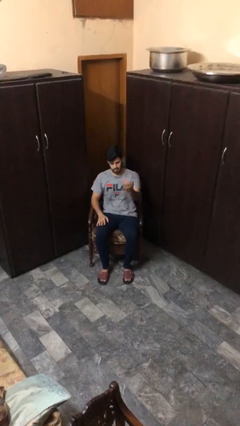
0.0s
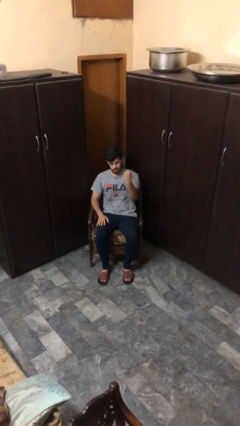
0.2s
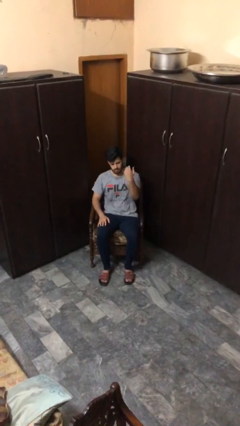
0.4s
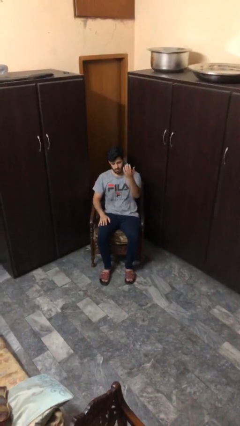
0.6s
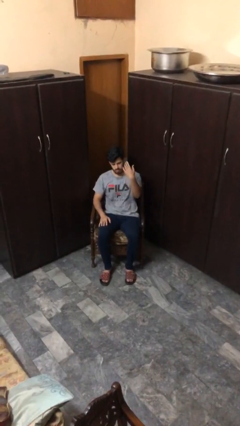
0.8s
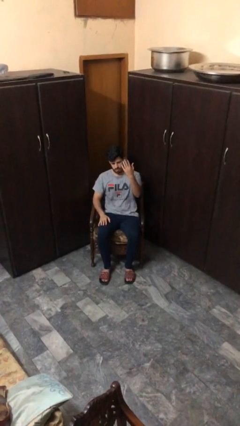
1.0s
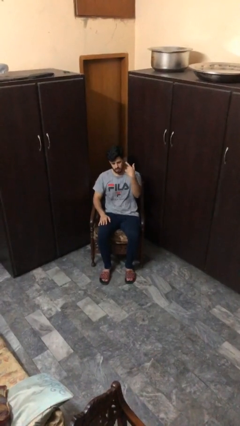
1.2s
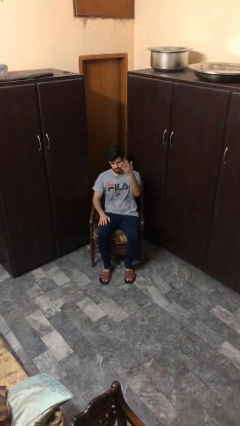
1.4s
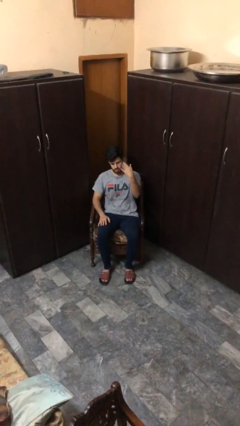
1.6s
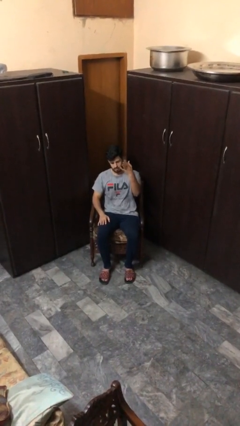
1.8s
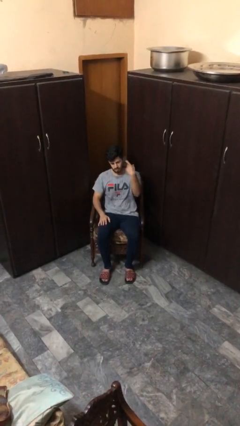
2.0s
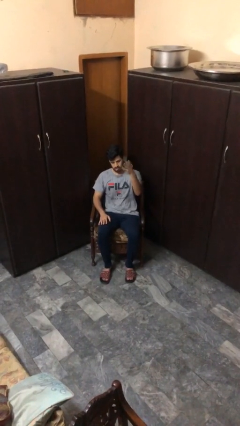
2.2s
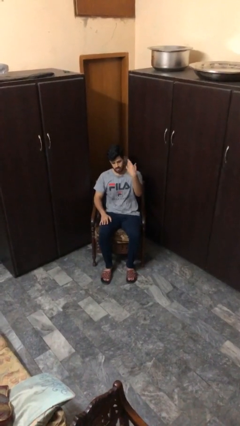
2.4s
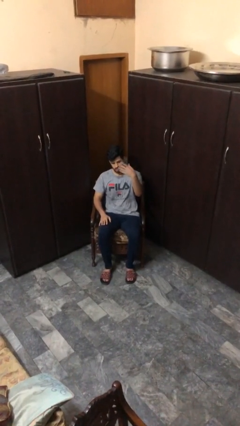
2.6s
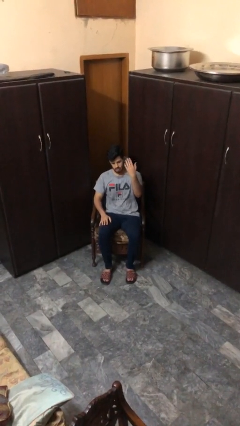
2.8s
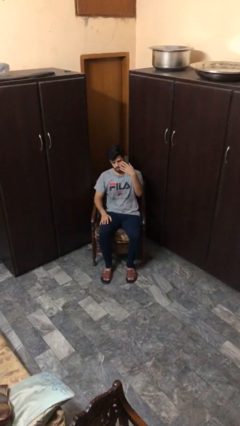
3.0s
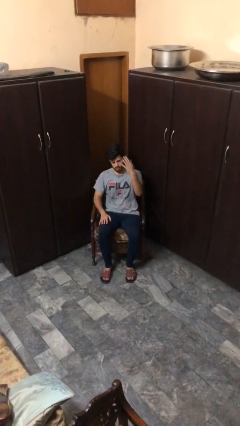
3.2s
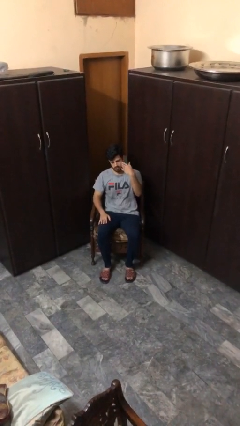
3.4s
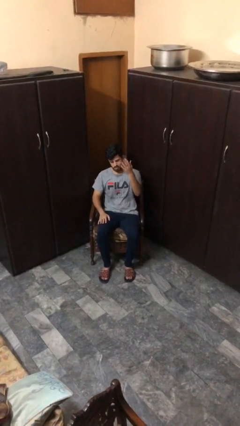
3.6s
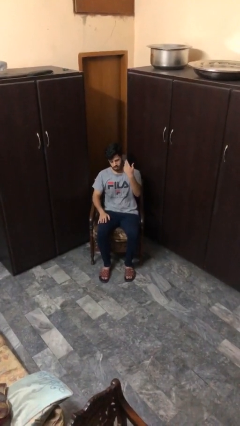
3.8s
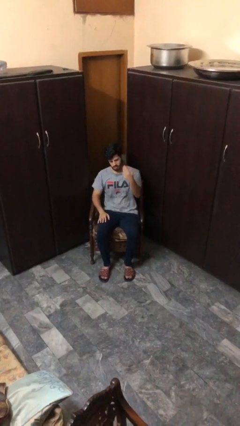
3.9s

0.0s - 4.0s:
person gestures come here

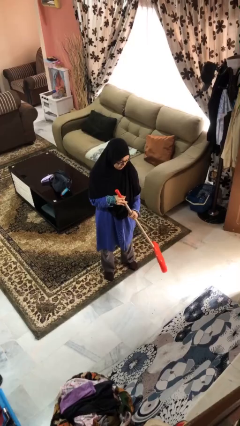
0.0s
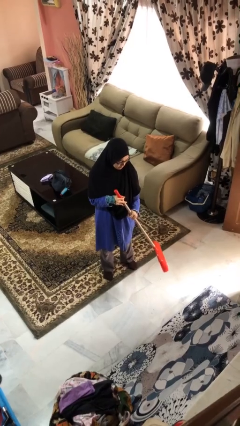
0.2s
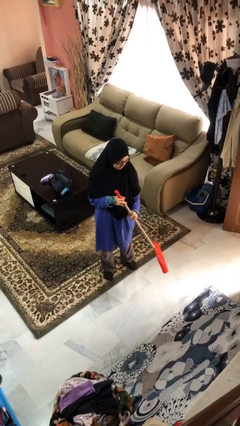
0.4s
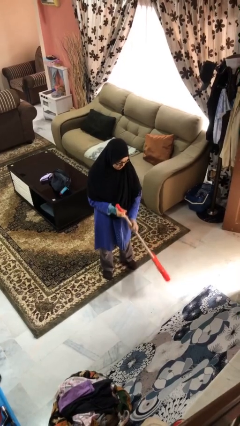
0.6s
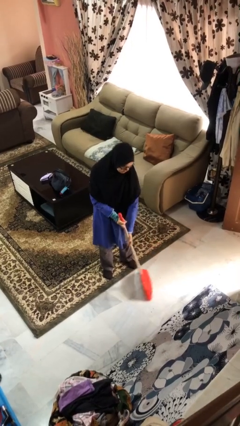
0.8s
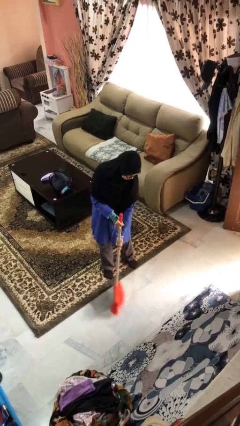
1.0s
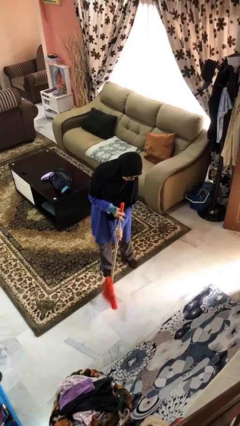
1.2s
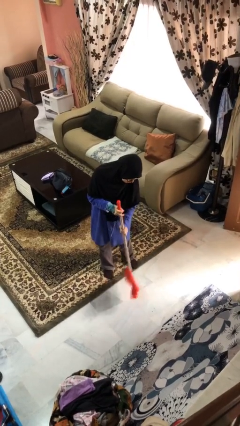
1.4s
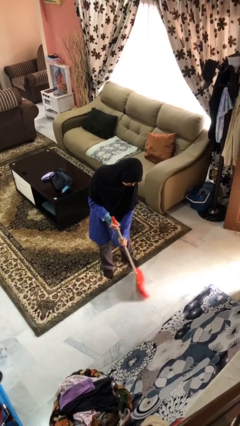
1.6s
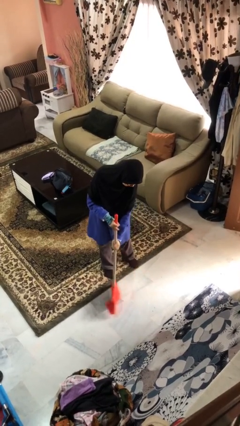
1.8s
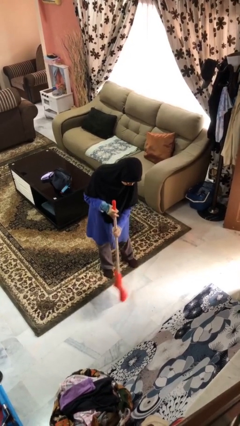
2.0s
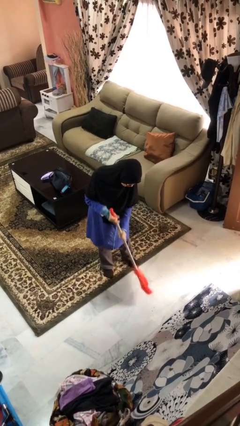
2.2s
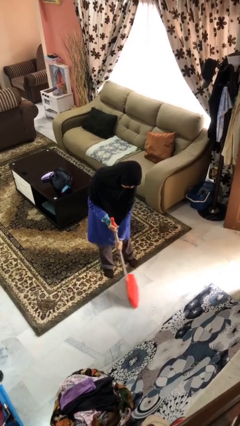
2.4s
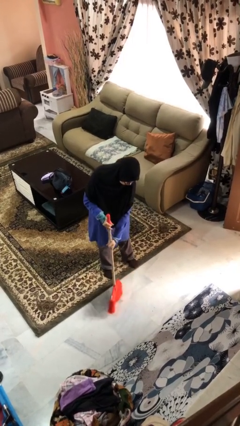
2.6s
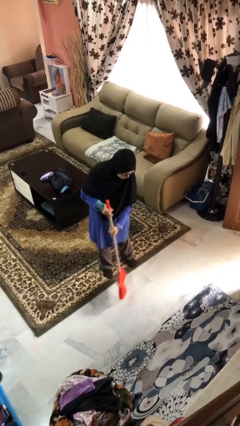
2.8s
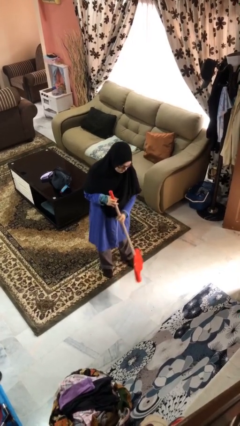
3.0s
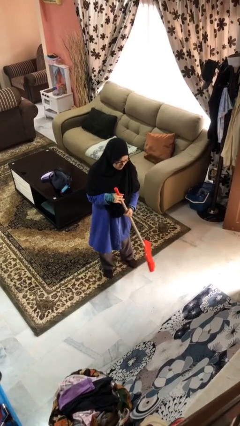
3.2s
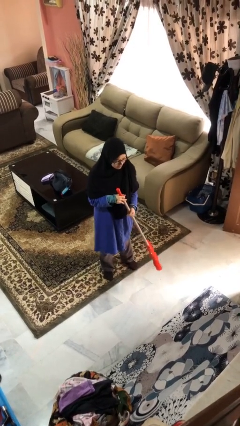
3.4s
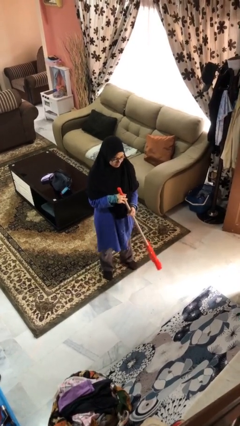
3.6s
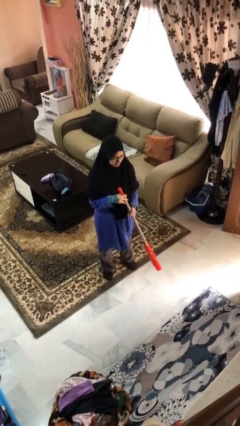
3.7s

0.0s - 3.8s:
person sweeps floor

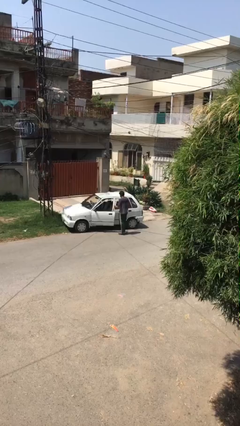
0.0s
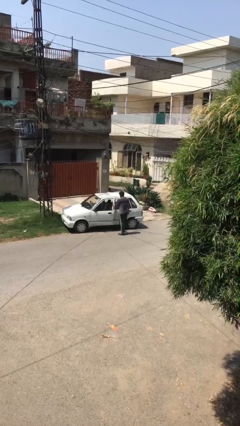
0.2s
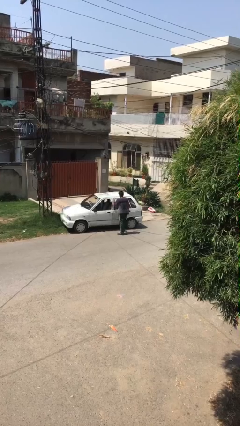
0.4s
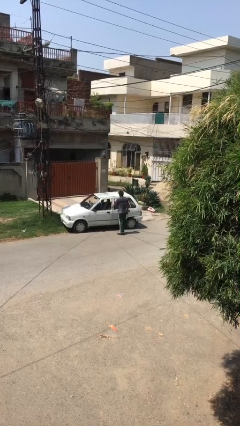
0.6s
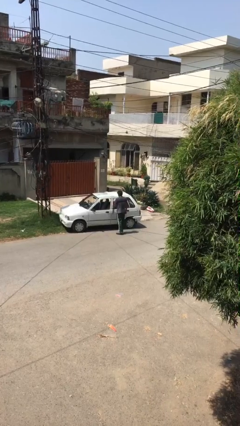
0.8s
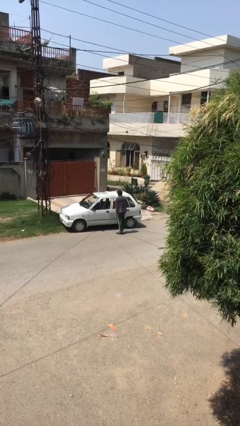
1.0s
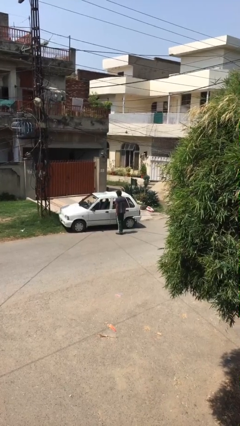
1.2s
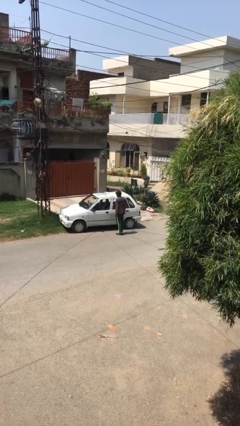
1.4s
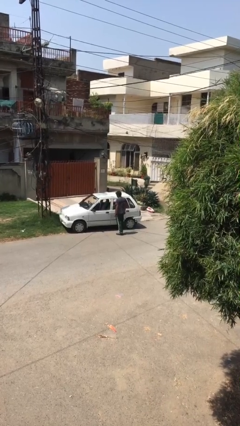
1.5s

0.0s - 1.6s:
person closes car door

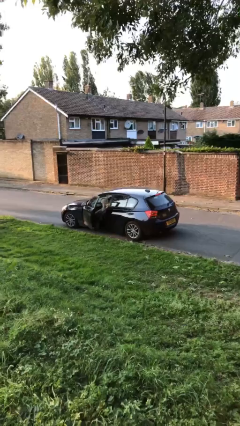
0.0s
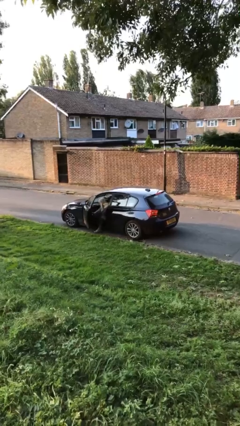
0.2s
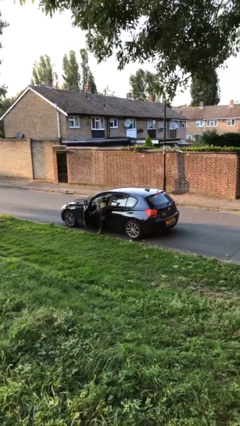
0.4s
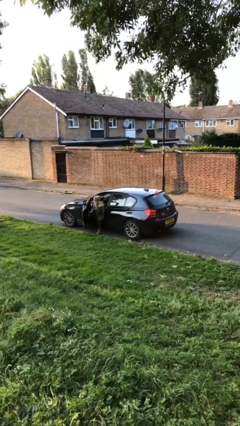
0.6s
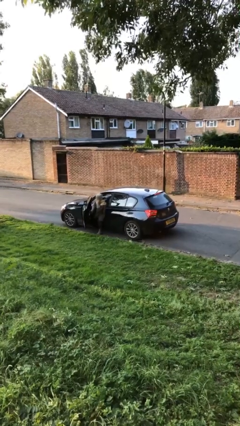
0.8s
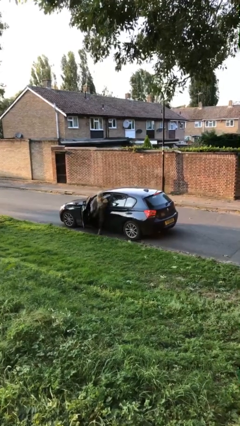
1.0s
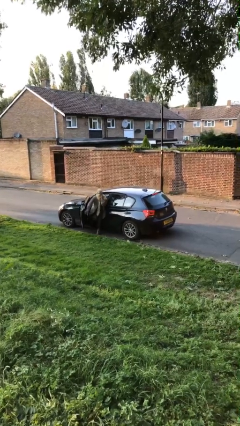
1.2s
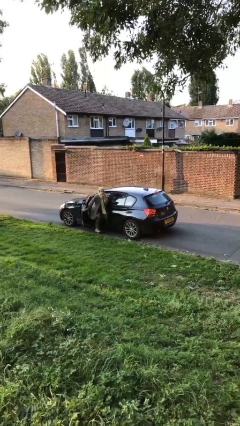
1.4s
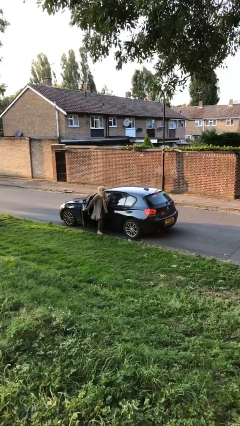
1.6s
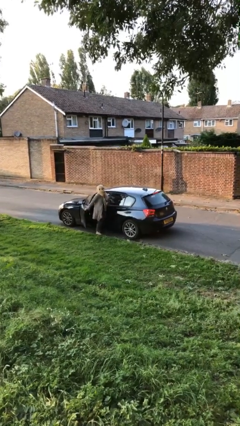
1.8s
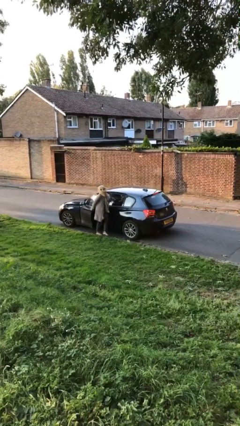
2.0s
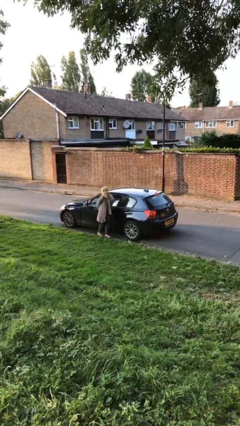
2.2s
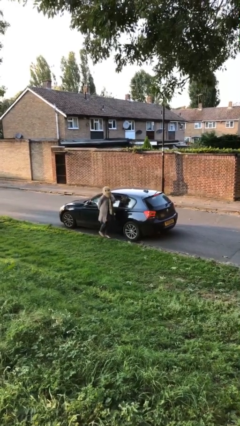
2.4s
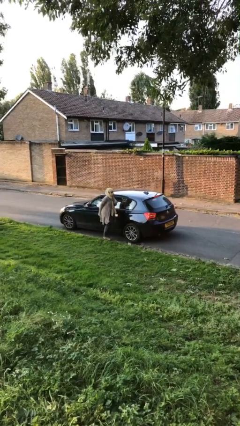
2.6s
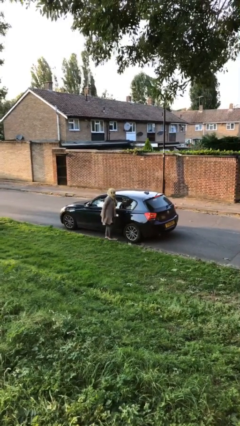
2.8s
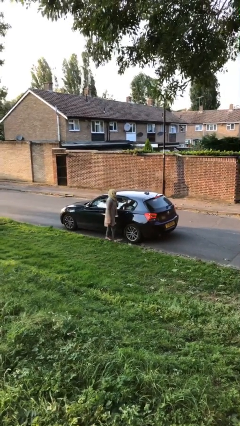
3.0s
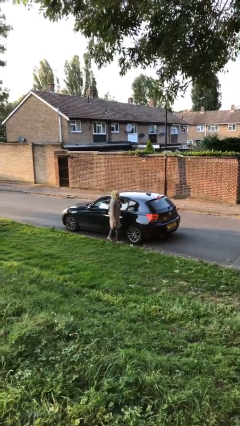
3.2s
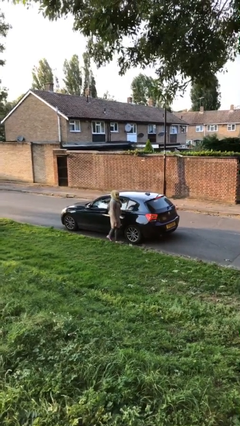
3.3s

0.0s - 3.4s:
car drops off person

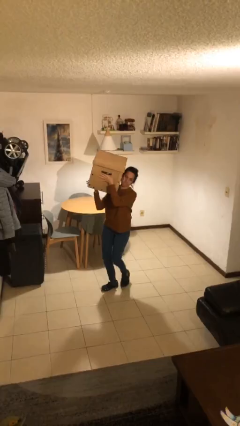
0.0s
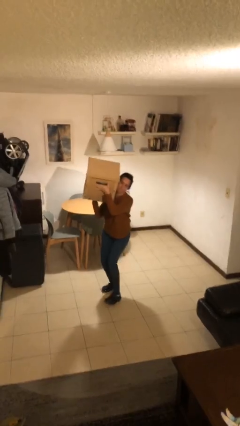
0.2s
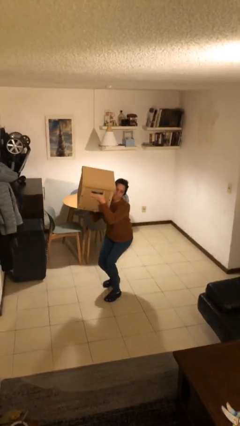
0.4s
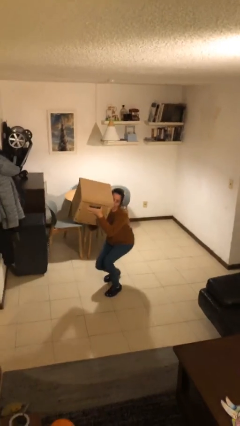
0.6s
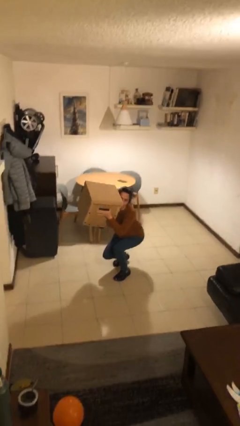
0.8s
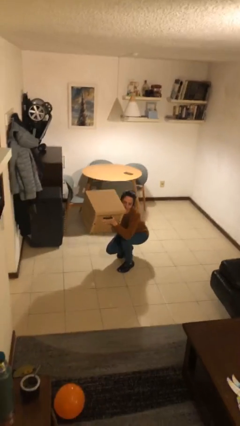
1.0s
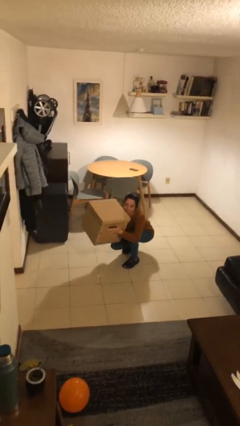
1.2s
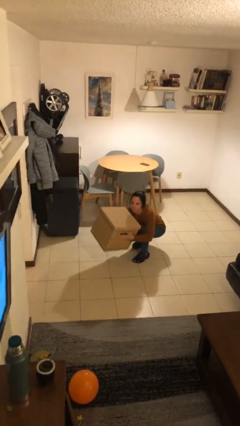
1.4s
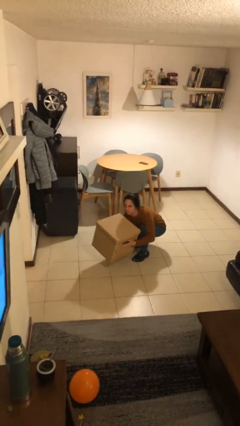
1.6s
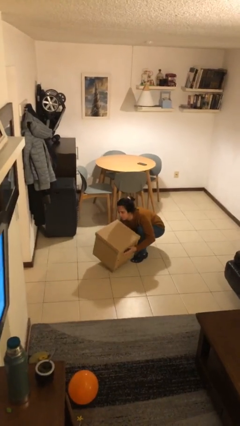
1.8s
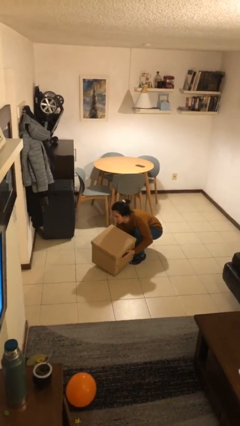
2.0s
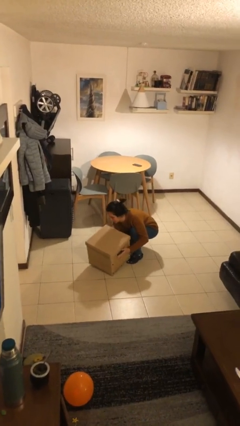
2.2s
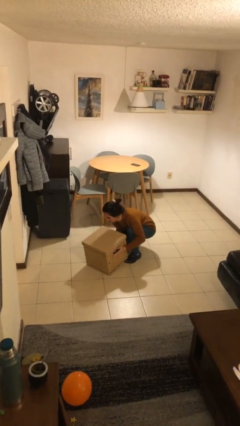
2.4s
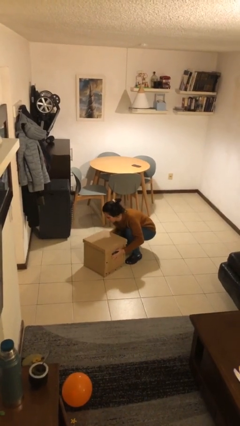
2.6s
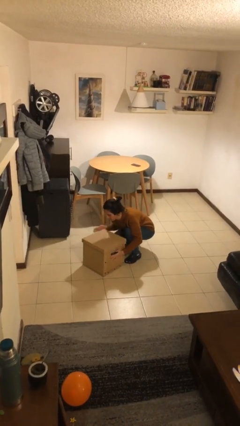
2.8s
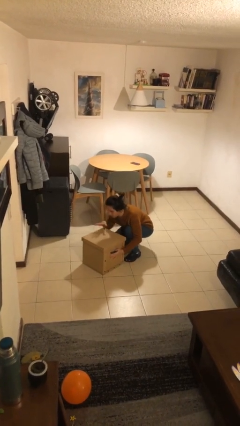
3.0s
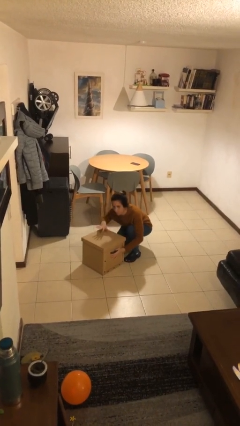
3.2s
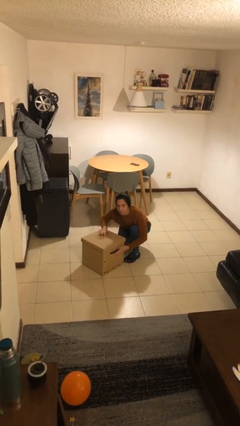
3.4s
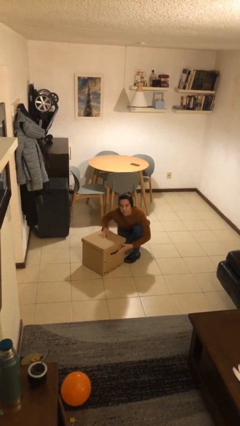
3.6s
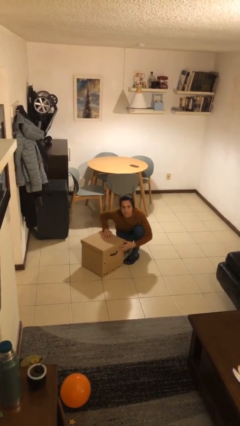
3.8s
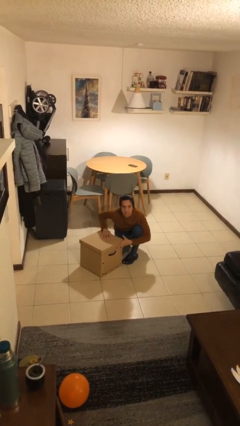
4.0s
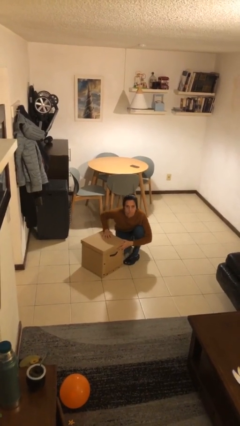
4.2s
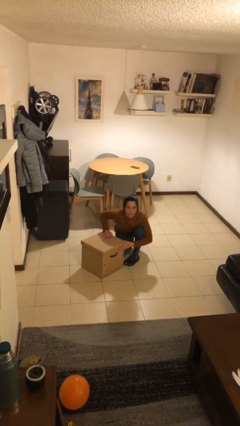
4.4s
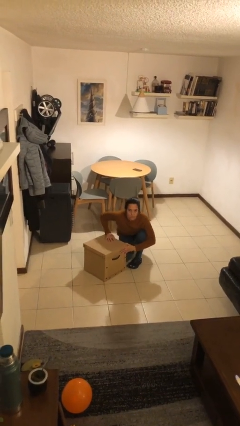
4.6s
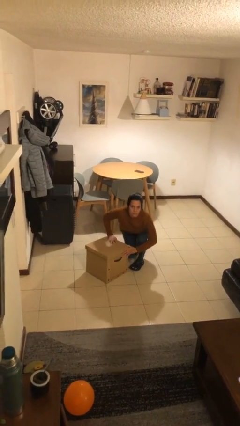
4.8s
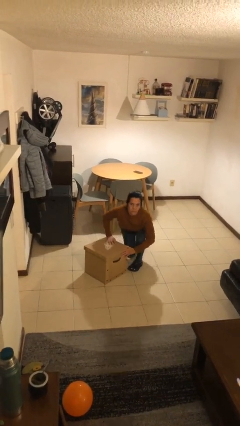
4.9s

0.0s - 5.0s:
person puts down object on floor
